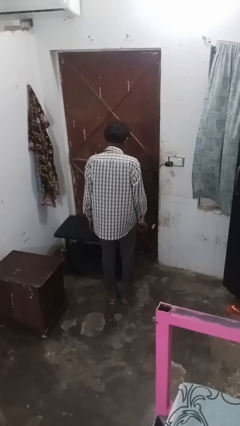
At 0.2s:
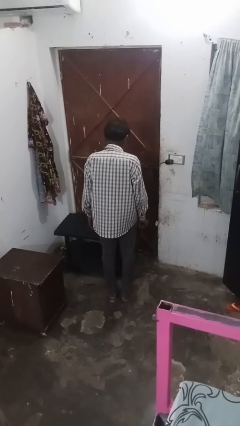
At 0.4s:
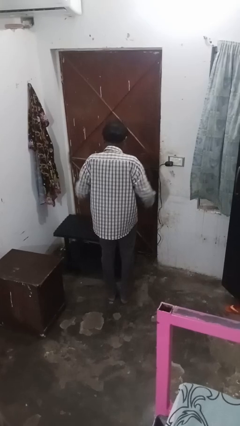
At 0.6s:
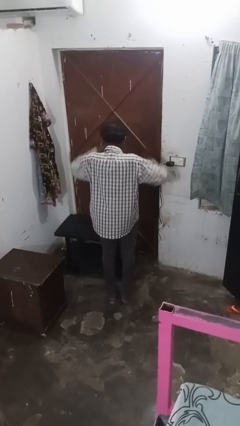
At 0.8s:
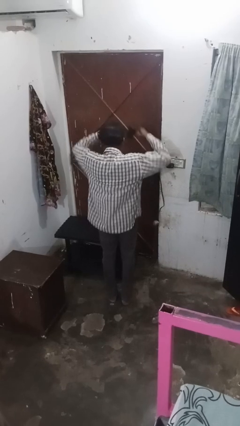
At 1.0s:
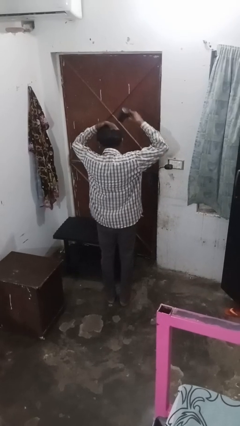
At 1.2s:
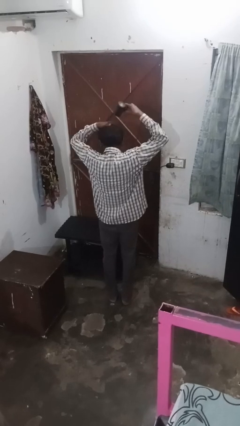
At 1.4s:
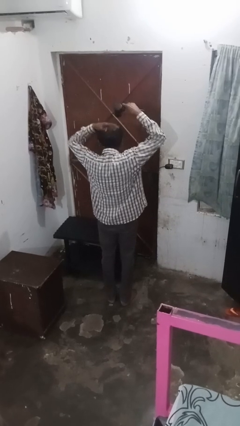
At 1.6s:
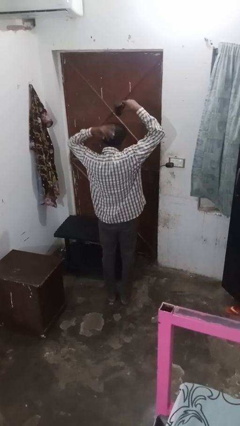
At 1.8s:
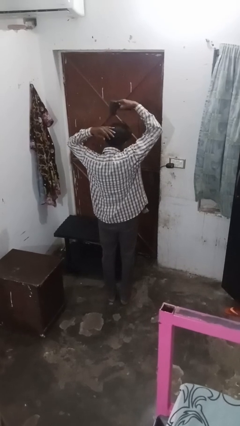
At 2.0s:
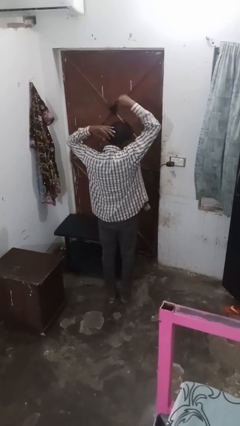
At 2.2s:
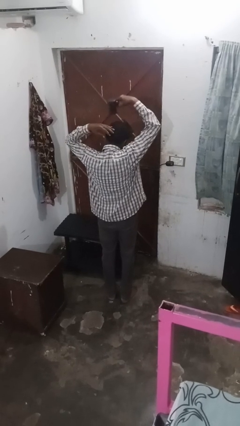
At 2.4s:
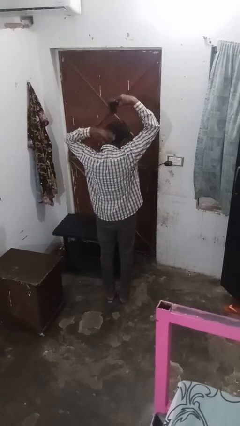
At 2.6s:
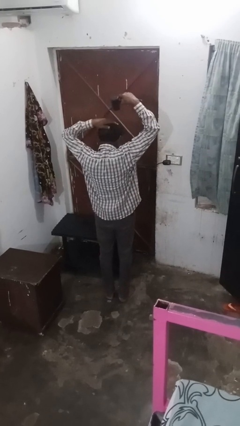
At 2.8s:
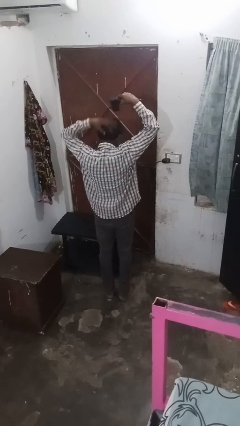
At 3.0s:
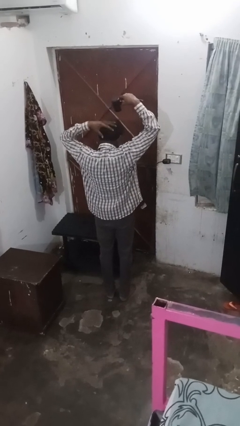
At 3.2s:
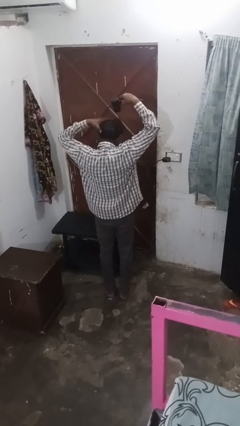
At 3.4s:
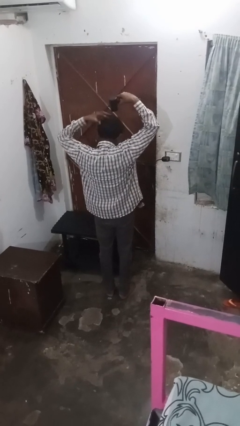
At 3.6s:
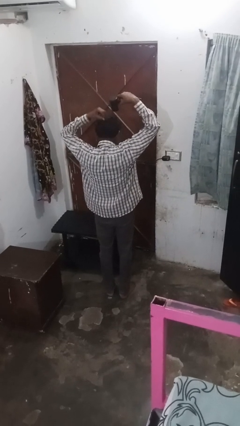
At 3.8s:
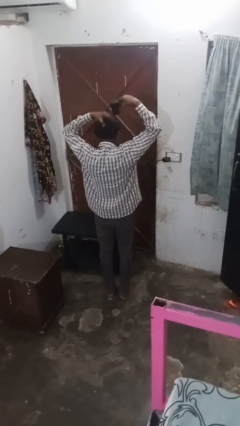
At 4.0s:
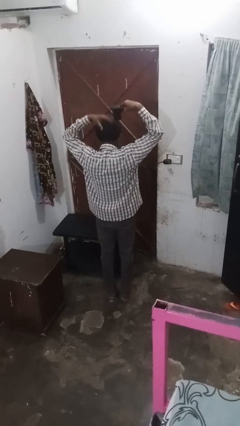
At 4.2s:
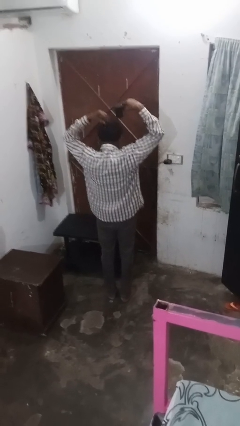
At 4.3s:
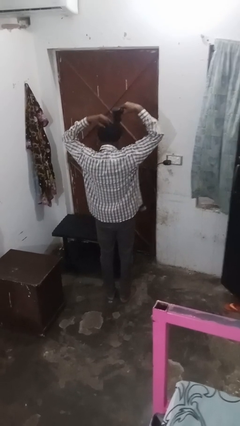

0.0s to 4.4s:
person dries hair with hairdryer

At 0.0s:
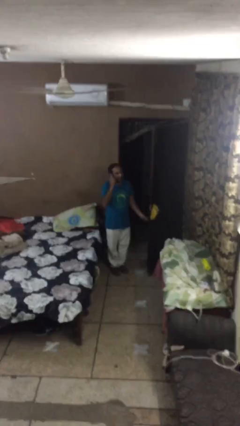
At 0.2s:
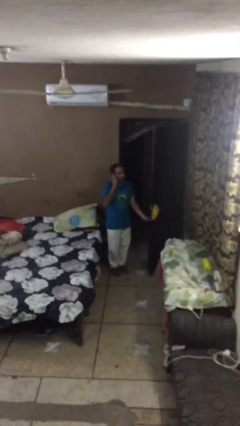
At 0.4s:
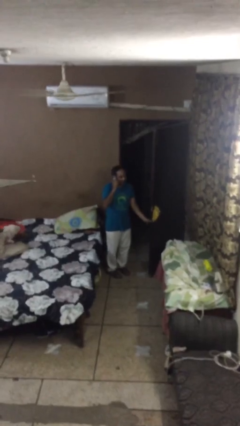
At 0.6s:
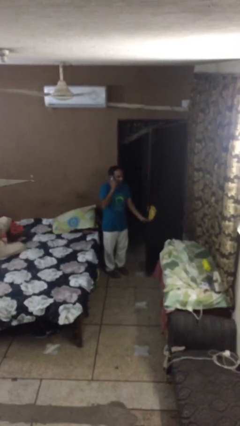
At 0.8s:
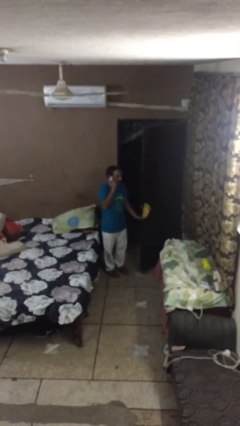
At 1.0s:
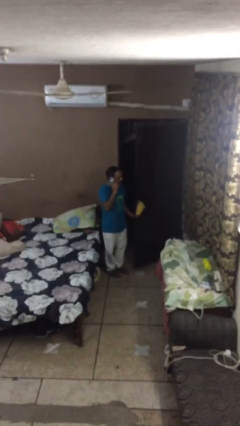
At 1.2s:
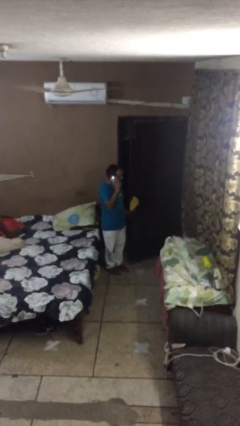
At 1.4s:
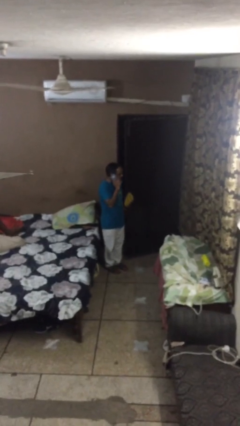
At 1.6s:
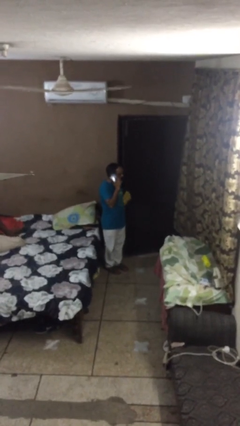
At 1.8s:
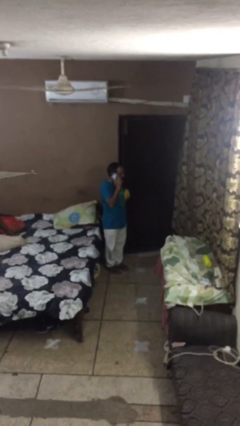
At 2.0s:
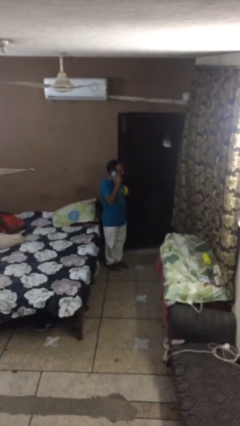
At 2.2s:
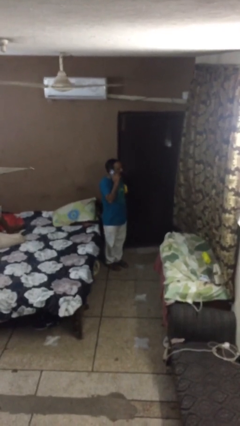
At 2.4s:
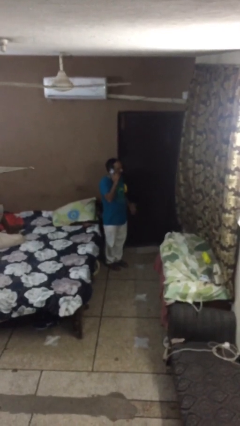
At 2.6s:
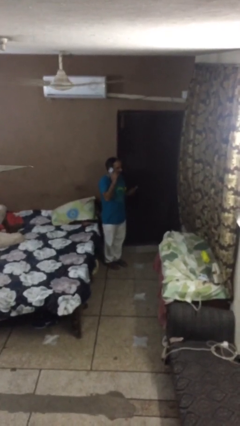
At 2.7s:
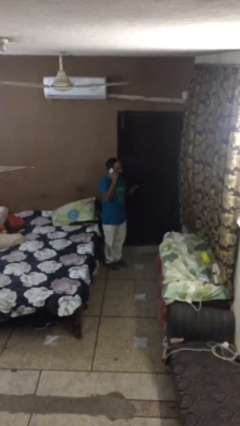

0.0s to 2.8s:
person closes facility door

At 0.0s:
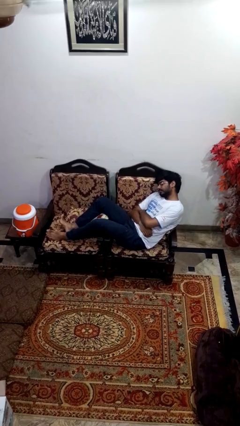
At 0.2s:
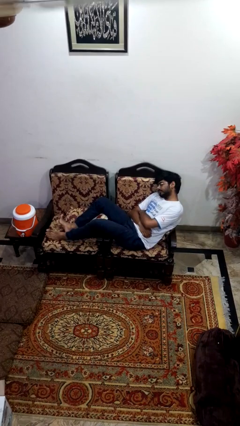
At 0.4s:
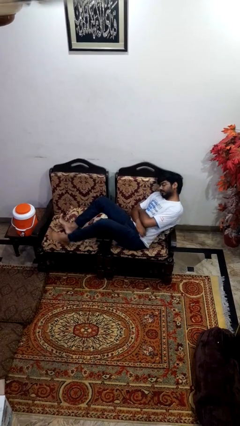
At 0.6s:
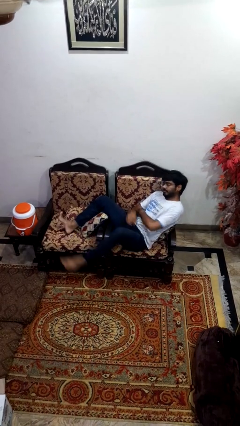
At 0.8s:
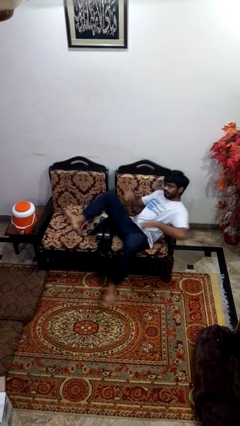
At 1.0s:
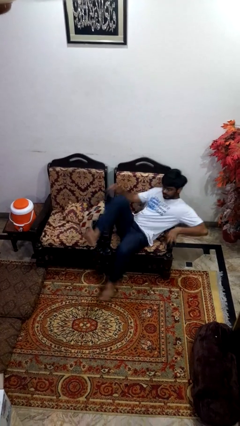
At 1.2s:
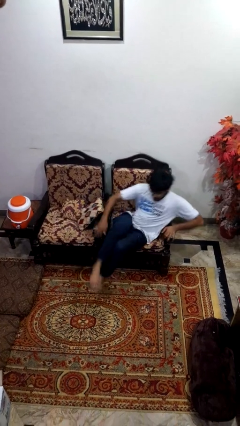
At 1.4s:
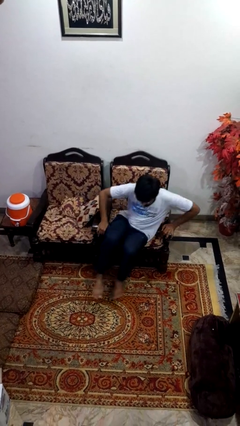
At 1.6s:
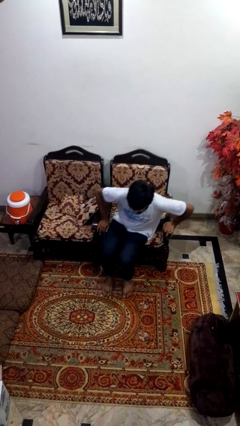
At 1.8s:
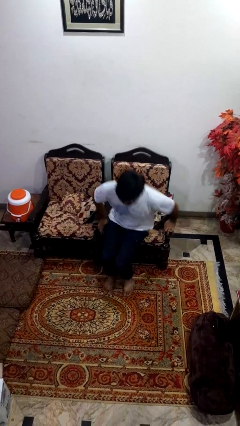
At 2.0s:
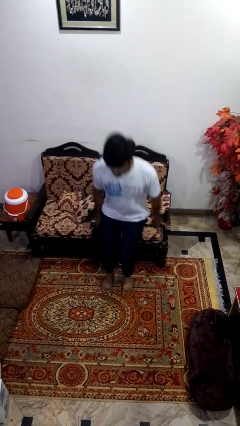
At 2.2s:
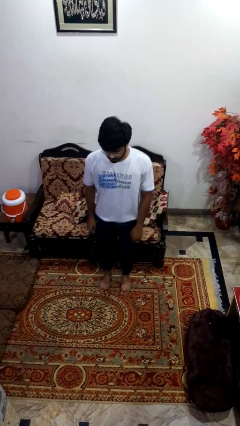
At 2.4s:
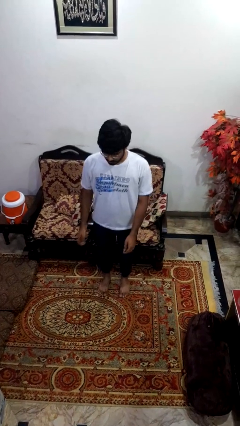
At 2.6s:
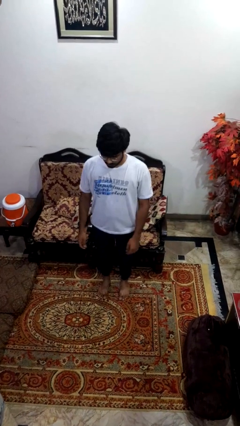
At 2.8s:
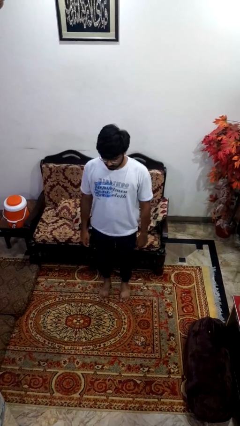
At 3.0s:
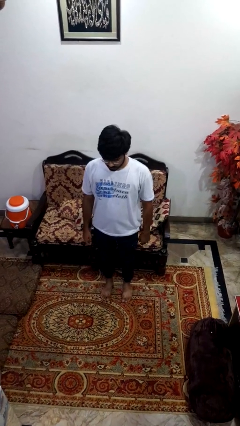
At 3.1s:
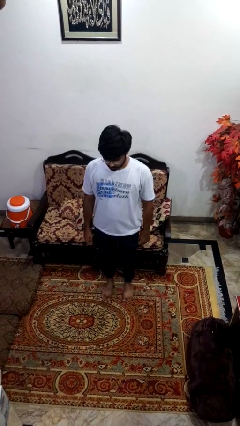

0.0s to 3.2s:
person stands up

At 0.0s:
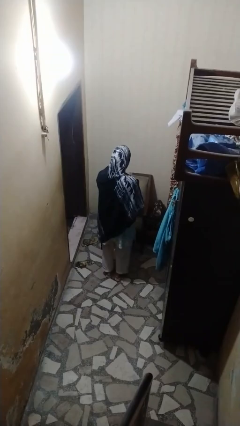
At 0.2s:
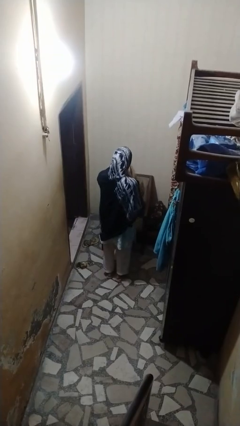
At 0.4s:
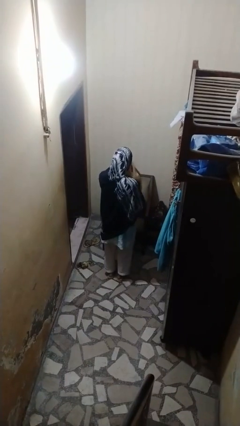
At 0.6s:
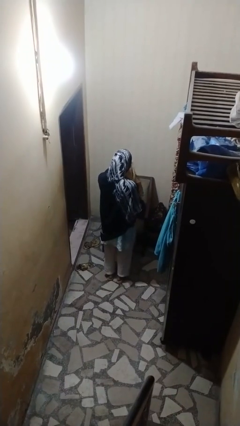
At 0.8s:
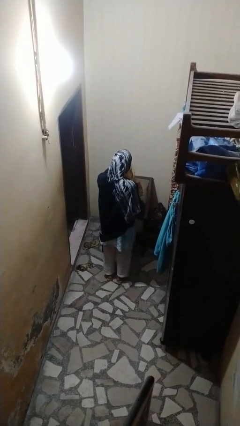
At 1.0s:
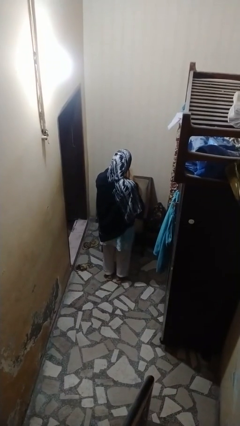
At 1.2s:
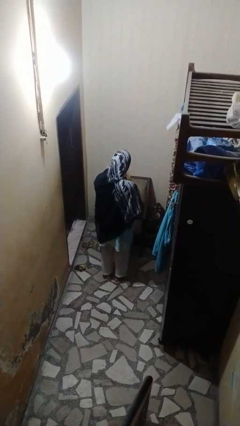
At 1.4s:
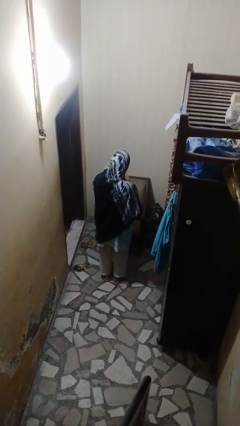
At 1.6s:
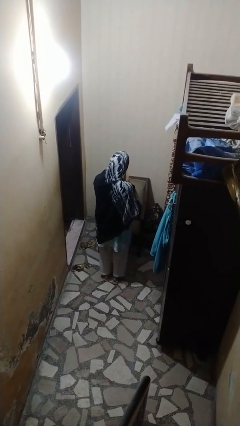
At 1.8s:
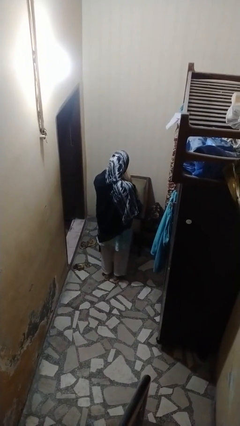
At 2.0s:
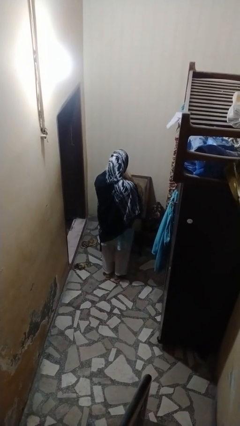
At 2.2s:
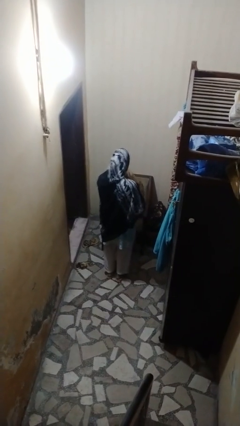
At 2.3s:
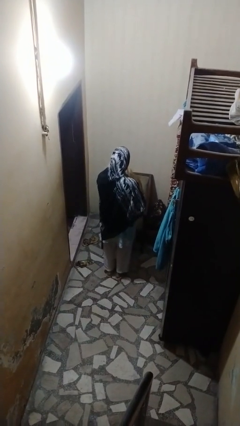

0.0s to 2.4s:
person searches in bag

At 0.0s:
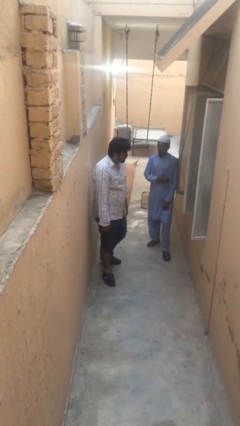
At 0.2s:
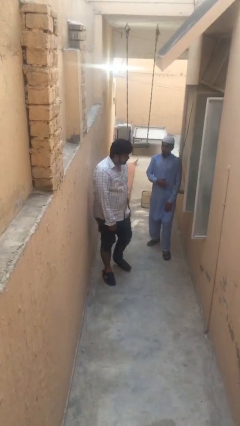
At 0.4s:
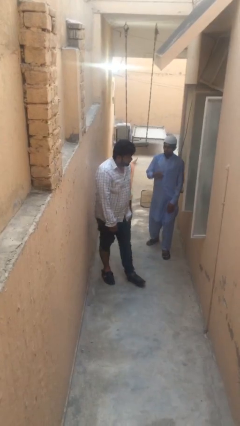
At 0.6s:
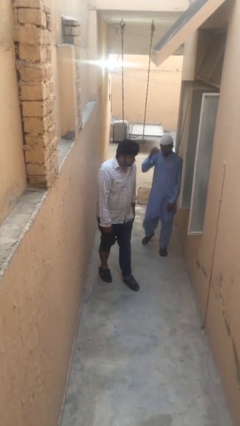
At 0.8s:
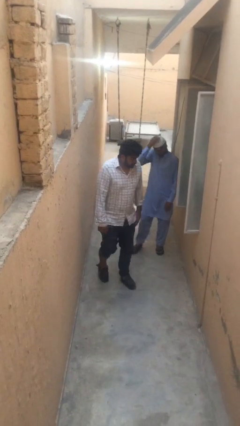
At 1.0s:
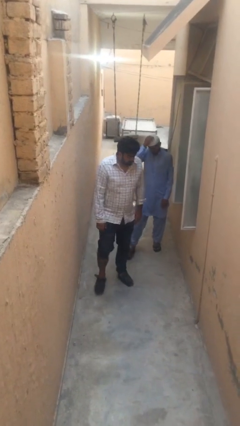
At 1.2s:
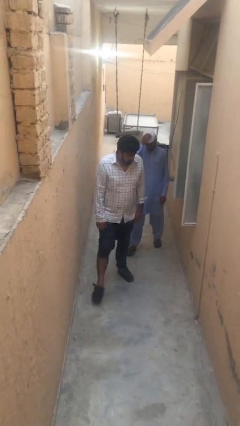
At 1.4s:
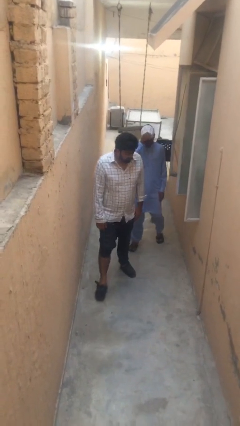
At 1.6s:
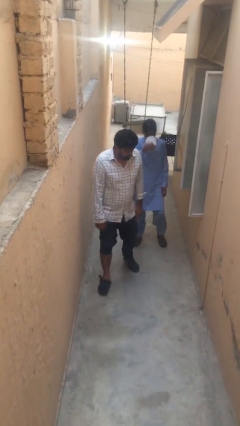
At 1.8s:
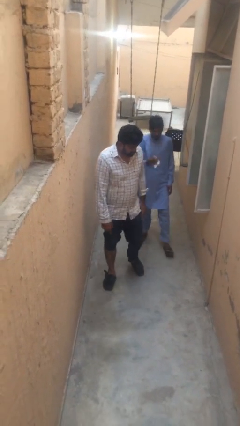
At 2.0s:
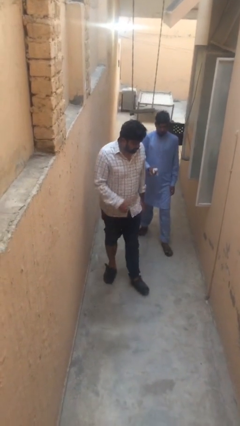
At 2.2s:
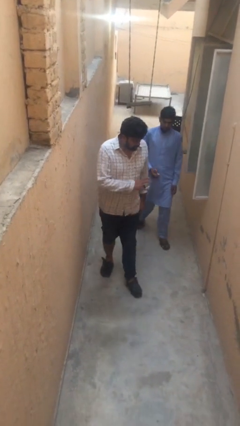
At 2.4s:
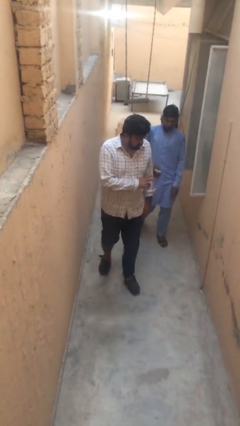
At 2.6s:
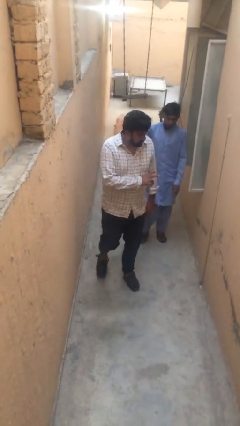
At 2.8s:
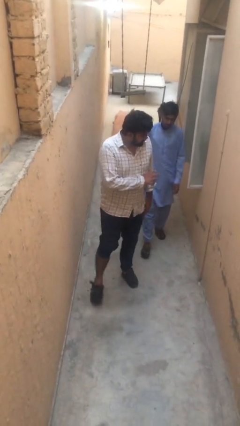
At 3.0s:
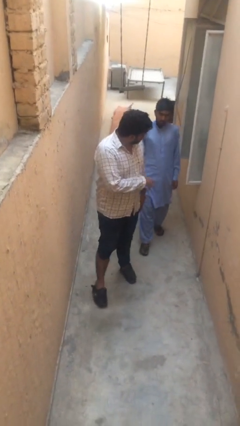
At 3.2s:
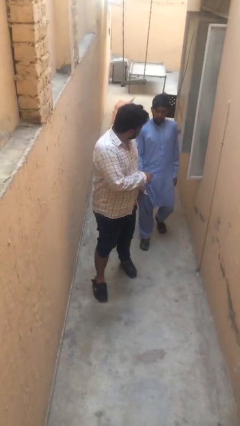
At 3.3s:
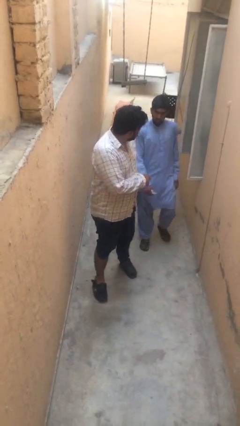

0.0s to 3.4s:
person talks to person

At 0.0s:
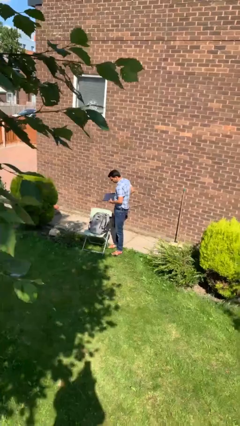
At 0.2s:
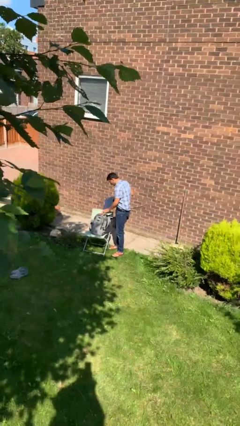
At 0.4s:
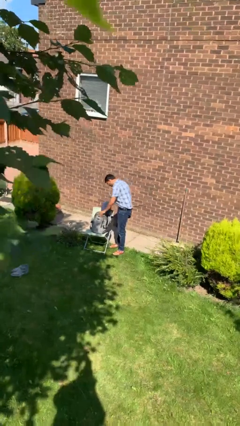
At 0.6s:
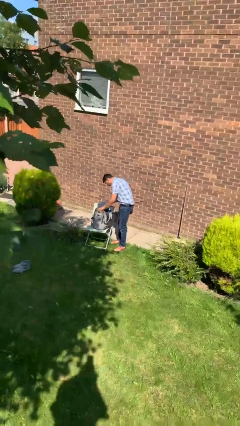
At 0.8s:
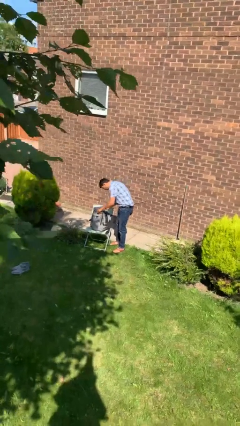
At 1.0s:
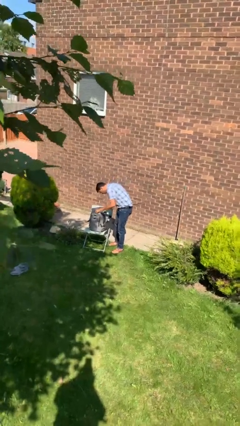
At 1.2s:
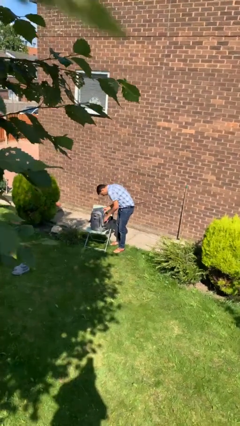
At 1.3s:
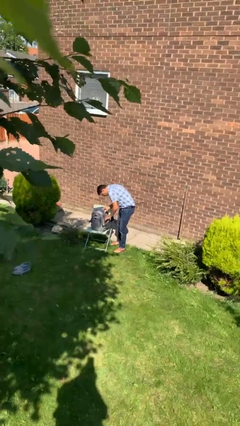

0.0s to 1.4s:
person puts object into backpack
